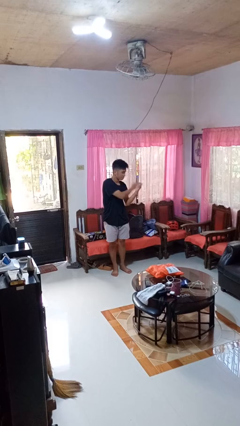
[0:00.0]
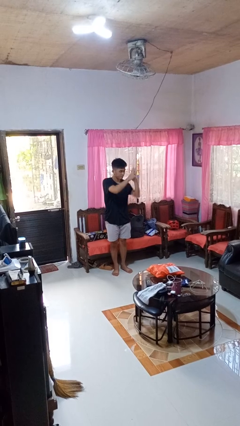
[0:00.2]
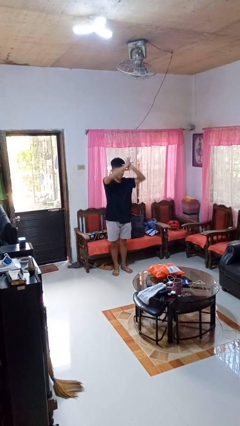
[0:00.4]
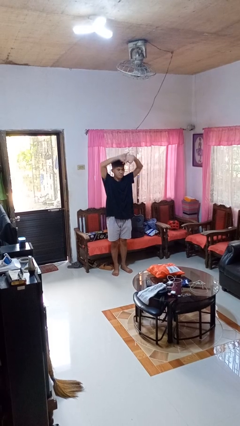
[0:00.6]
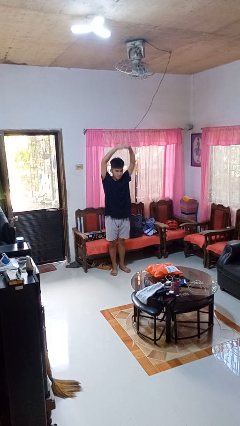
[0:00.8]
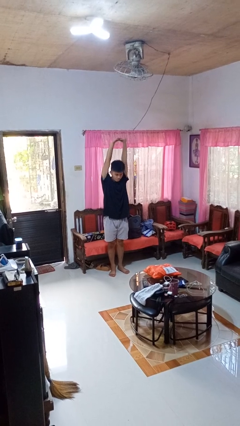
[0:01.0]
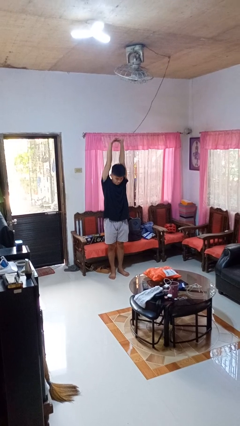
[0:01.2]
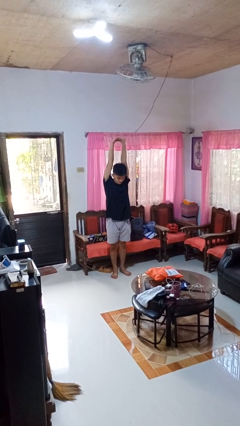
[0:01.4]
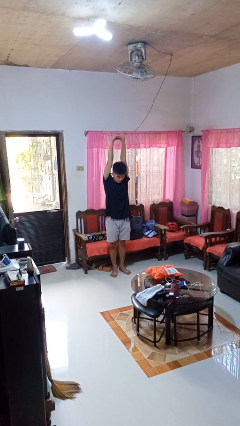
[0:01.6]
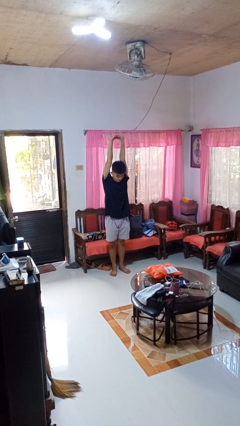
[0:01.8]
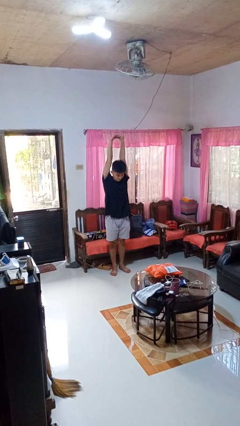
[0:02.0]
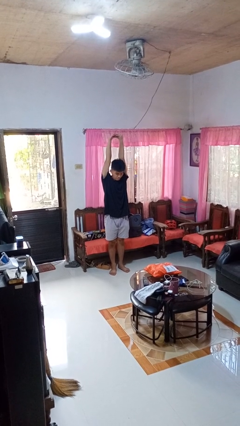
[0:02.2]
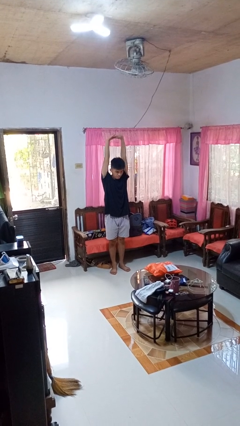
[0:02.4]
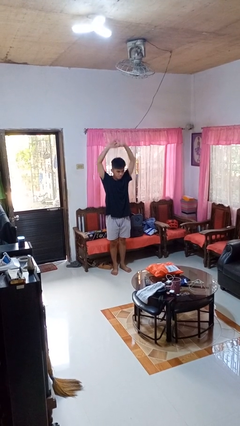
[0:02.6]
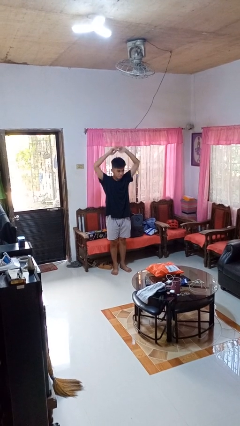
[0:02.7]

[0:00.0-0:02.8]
person stretches arms over head

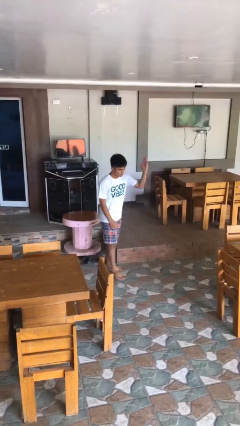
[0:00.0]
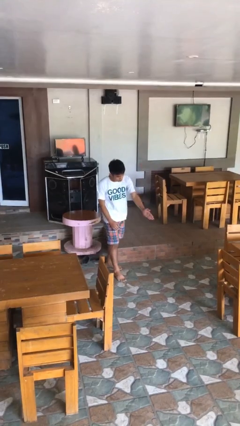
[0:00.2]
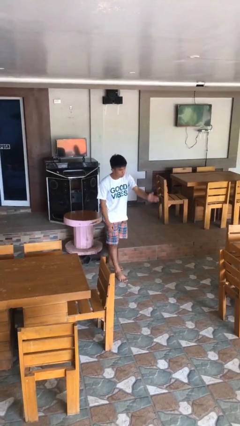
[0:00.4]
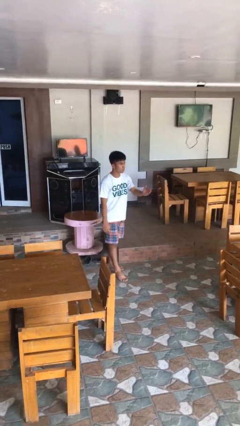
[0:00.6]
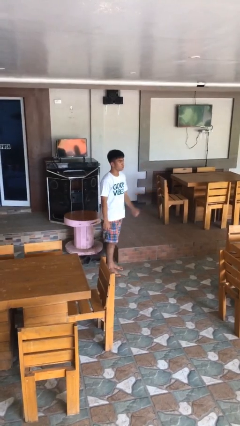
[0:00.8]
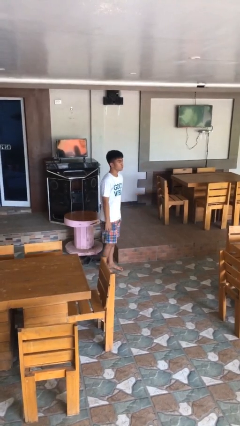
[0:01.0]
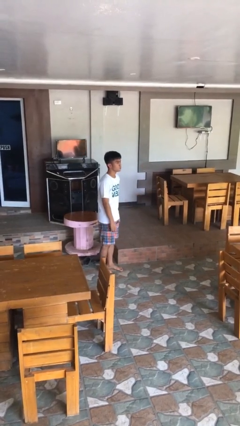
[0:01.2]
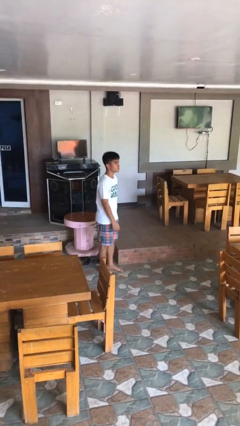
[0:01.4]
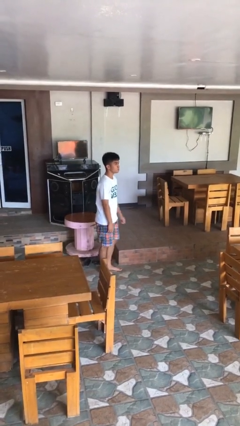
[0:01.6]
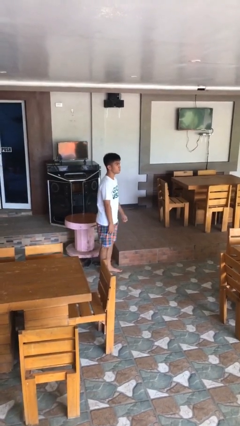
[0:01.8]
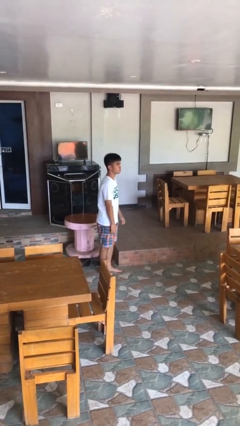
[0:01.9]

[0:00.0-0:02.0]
person karate chop

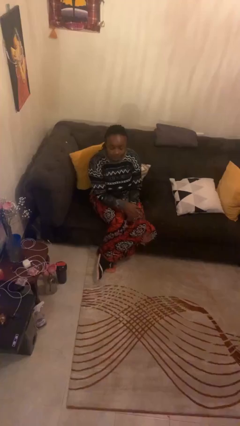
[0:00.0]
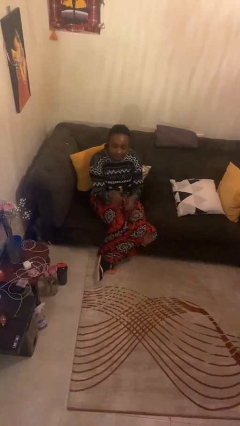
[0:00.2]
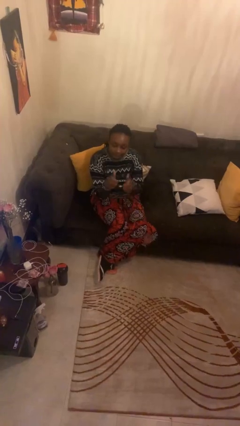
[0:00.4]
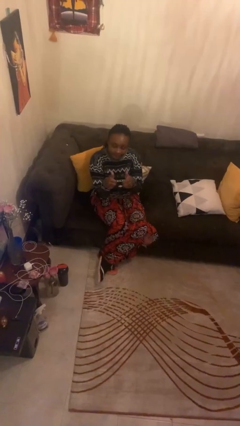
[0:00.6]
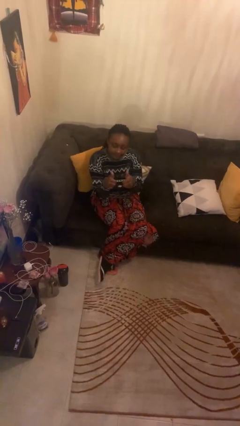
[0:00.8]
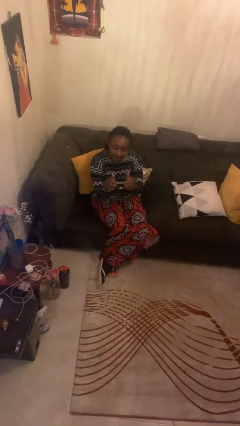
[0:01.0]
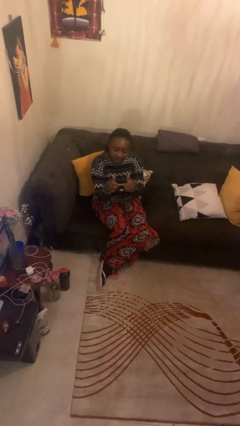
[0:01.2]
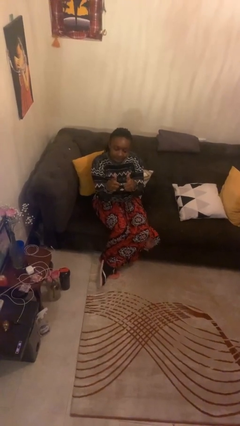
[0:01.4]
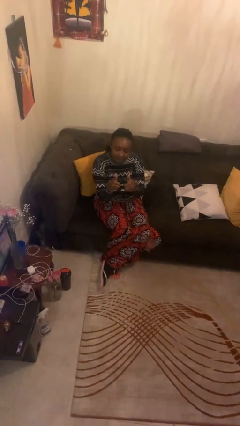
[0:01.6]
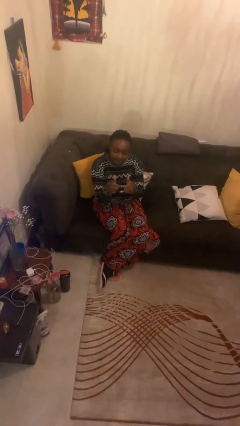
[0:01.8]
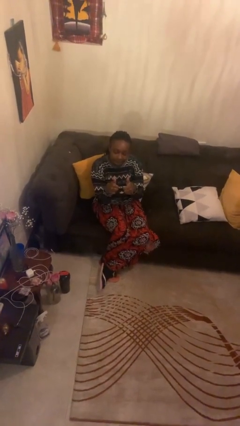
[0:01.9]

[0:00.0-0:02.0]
person gestures thumbs up

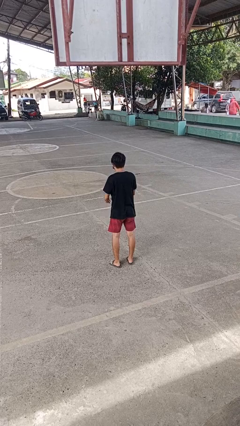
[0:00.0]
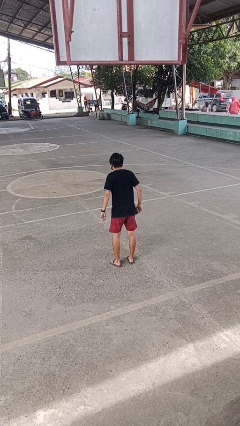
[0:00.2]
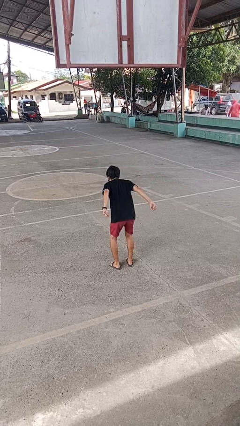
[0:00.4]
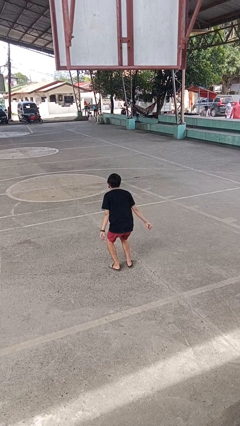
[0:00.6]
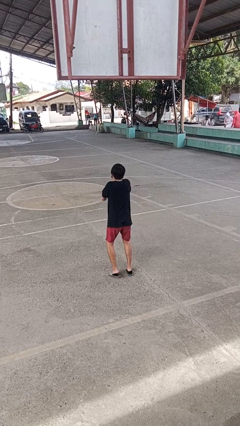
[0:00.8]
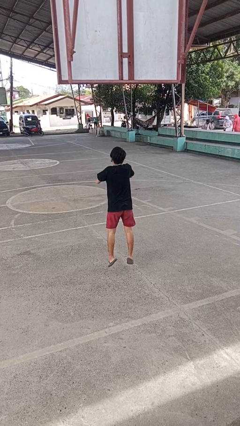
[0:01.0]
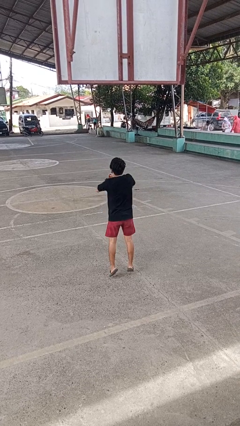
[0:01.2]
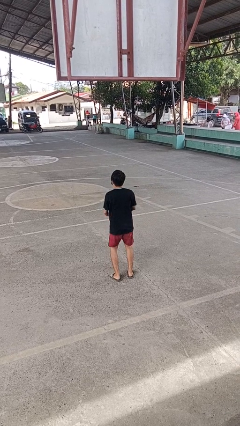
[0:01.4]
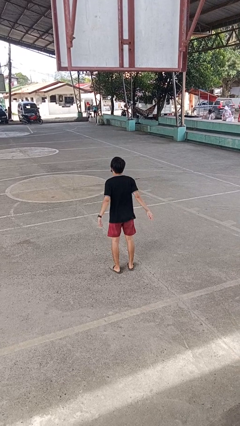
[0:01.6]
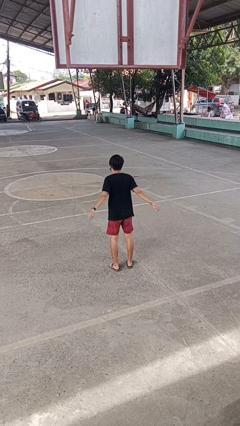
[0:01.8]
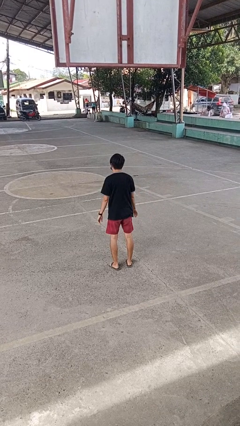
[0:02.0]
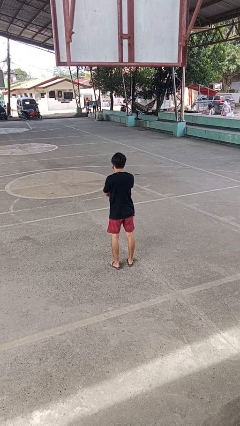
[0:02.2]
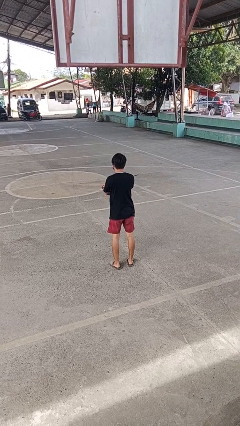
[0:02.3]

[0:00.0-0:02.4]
person jumps

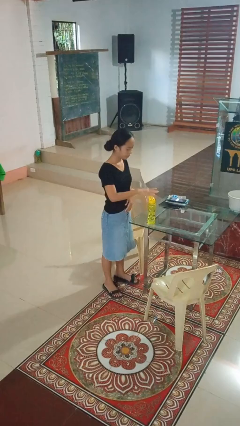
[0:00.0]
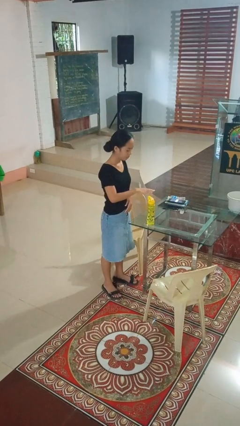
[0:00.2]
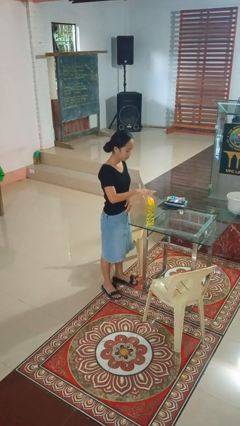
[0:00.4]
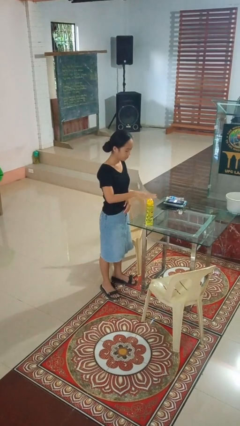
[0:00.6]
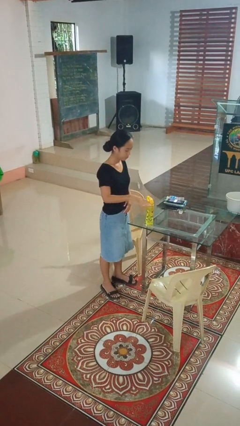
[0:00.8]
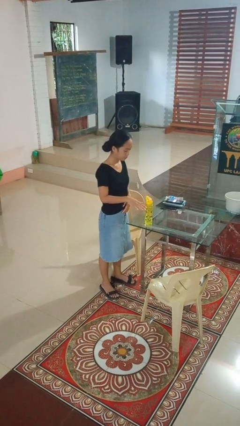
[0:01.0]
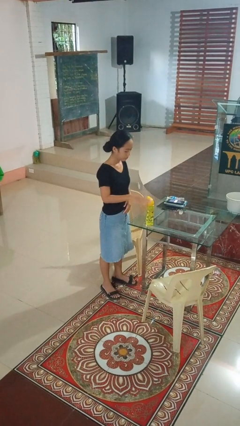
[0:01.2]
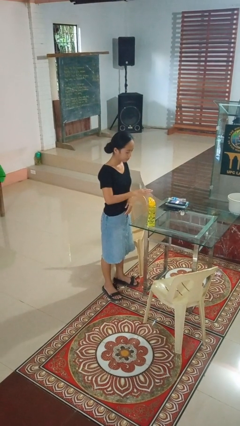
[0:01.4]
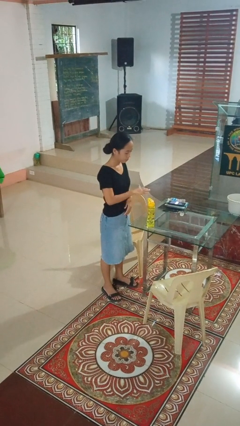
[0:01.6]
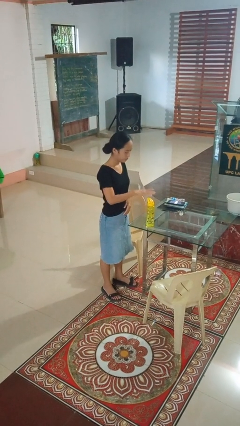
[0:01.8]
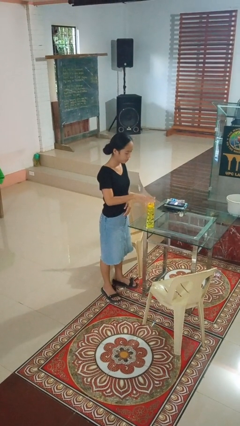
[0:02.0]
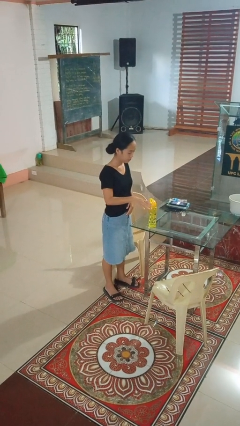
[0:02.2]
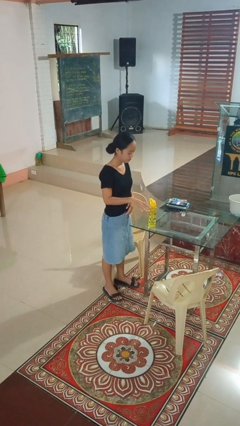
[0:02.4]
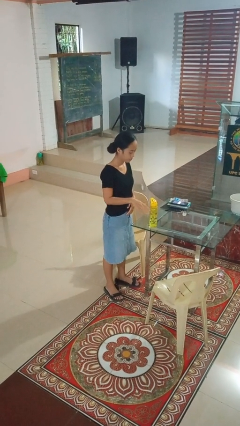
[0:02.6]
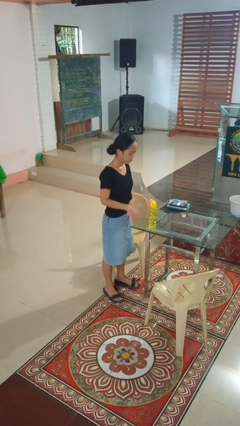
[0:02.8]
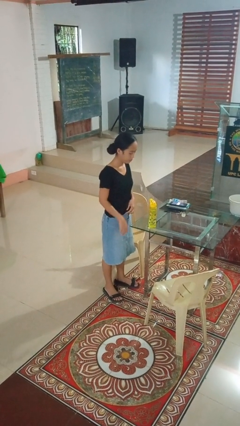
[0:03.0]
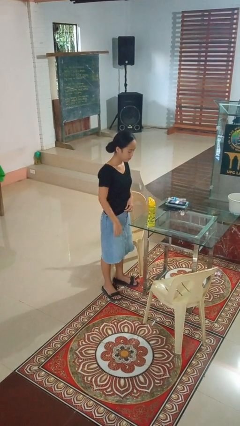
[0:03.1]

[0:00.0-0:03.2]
person waves hand over object

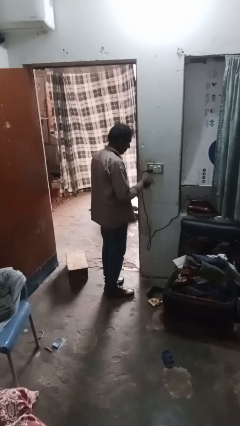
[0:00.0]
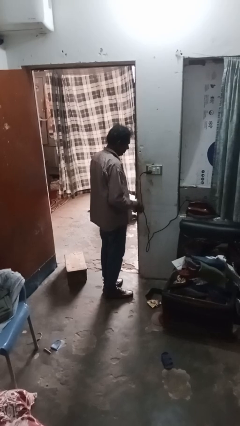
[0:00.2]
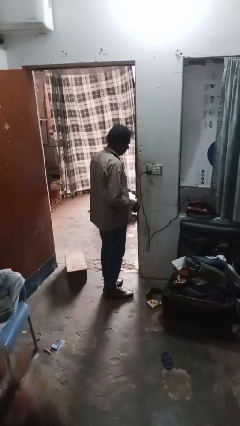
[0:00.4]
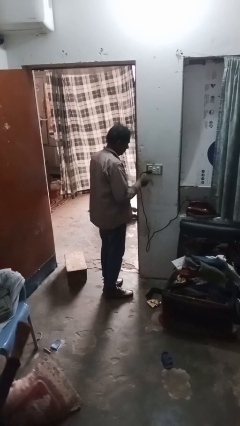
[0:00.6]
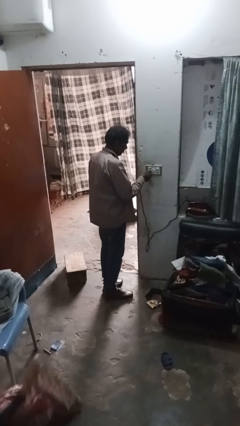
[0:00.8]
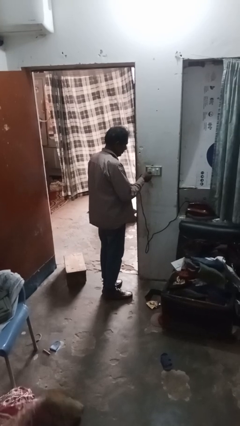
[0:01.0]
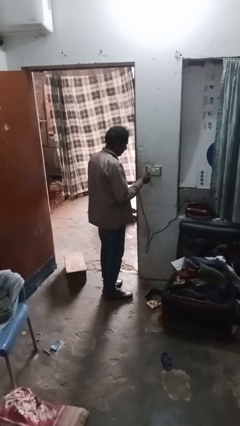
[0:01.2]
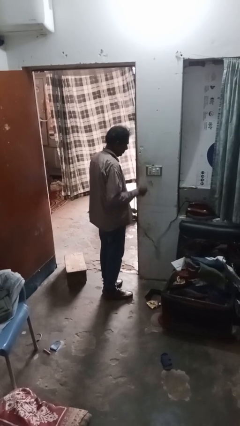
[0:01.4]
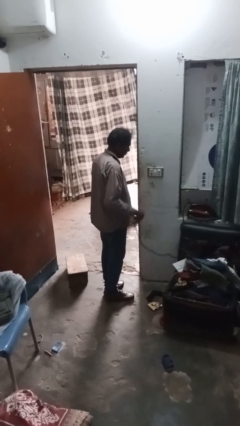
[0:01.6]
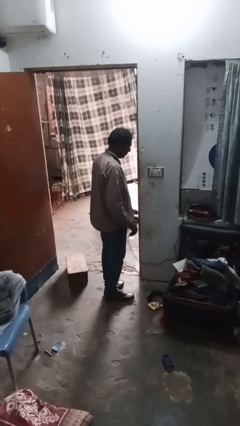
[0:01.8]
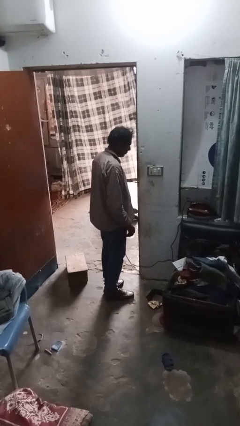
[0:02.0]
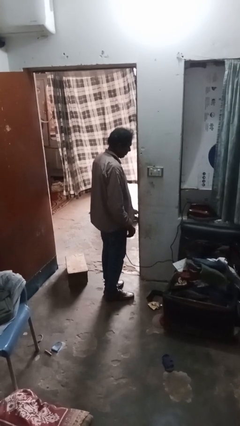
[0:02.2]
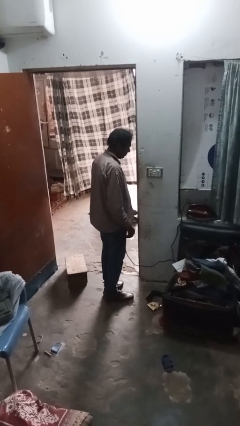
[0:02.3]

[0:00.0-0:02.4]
person unplugs from electrical socket

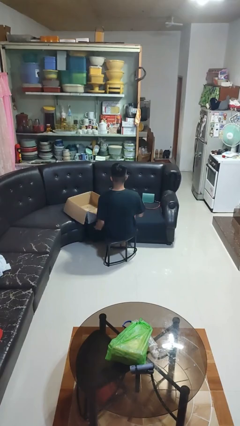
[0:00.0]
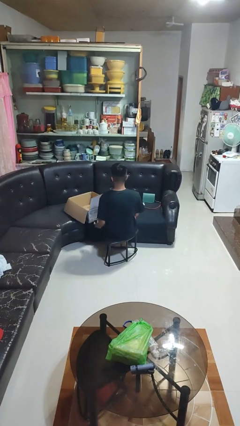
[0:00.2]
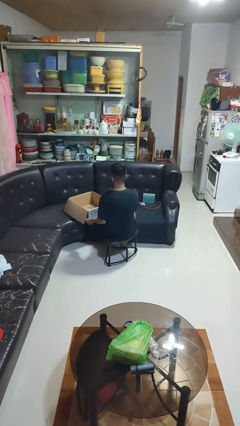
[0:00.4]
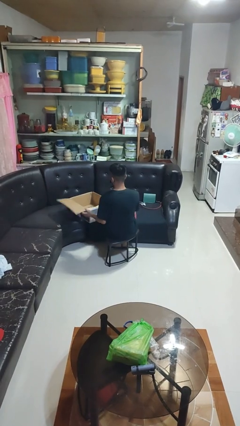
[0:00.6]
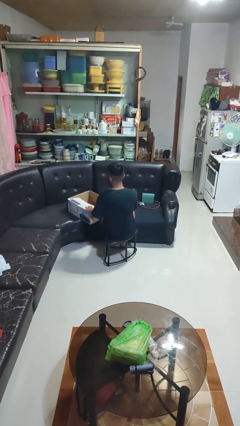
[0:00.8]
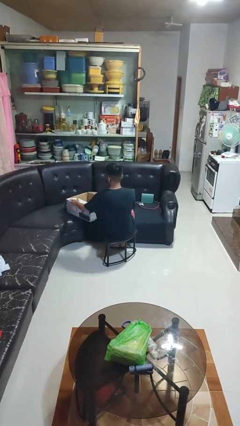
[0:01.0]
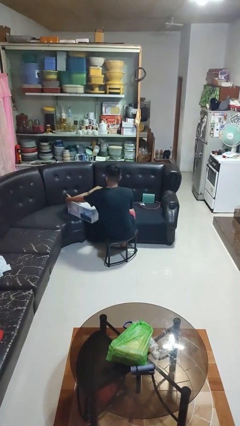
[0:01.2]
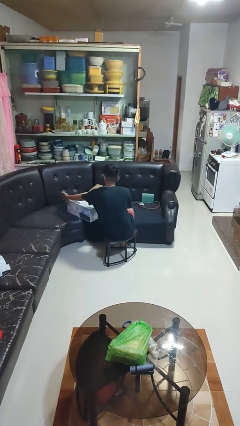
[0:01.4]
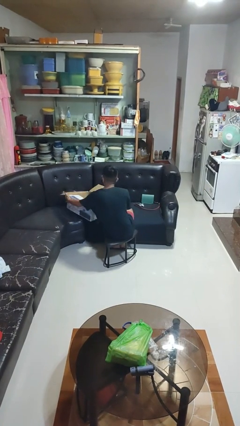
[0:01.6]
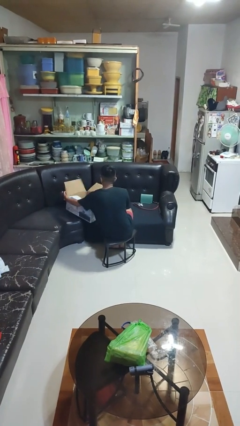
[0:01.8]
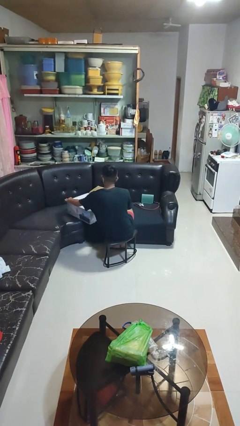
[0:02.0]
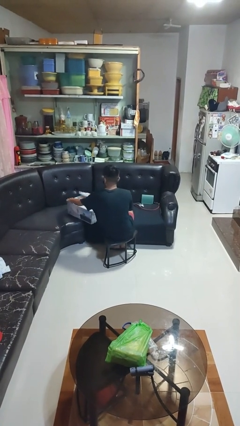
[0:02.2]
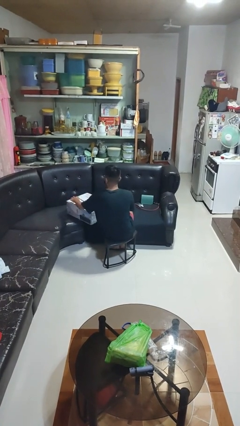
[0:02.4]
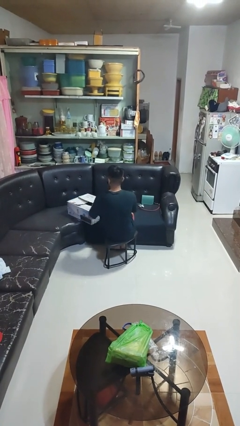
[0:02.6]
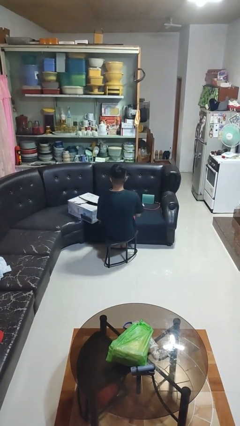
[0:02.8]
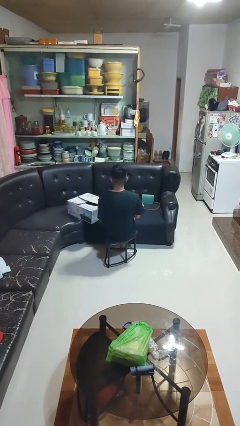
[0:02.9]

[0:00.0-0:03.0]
person closes box
